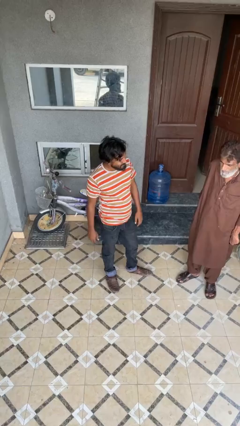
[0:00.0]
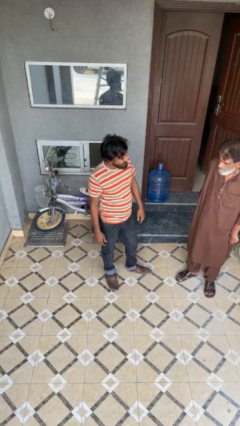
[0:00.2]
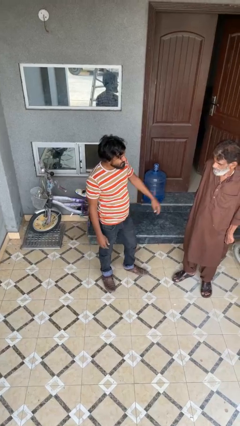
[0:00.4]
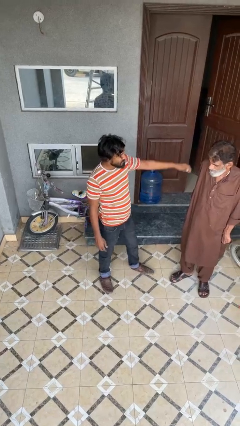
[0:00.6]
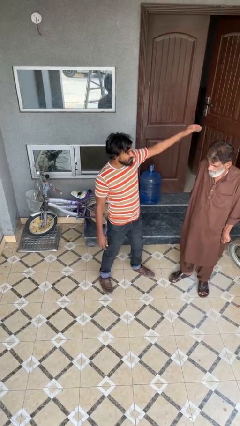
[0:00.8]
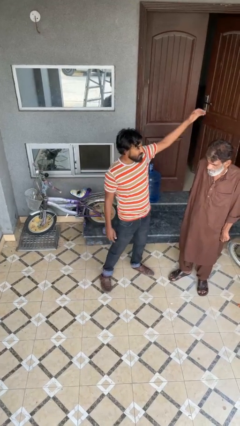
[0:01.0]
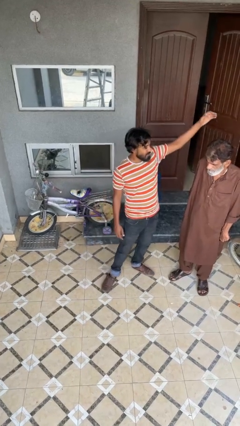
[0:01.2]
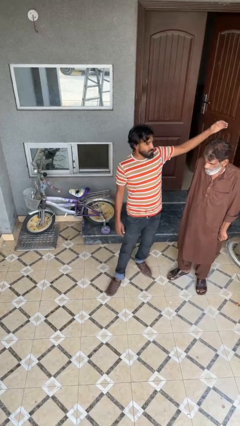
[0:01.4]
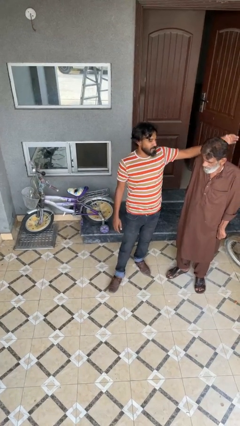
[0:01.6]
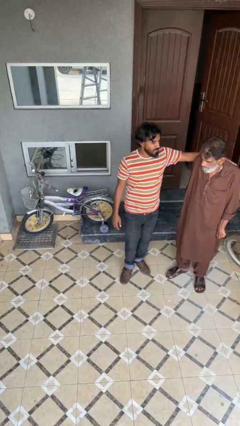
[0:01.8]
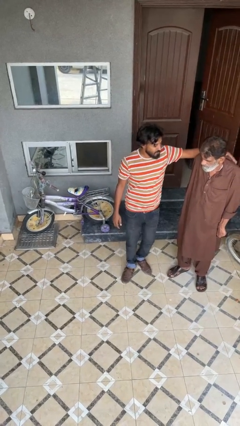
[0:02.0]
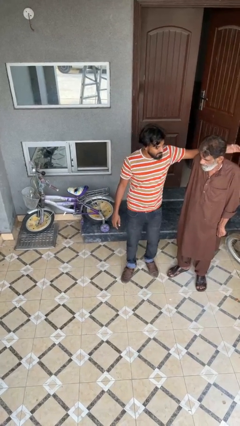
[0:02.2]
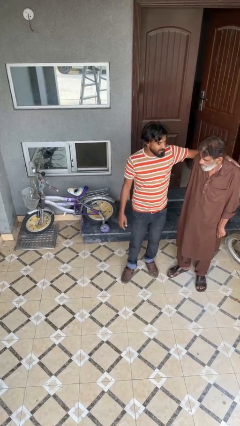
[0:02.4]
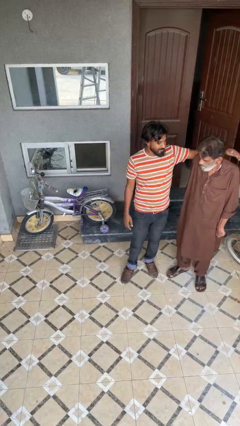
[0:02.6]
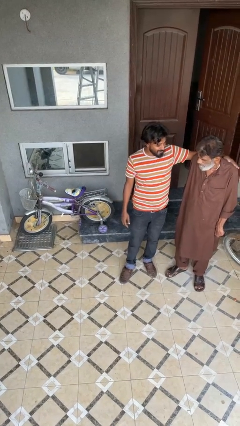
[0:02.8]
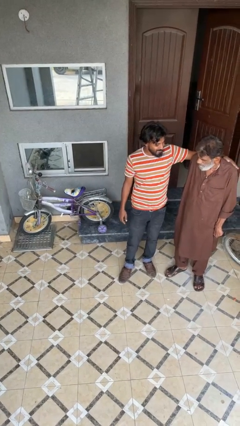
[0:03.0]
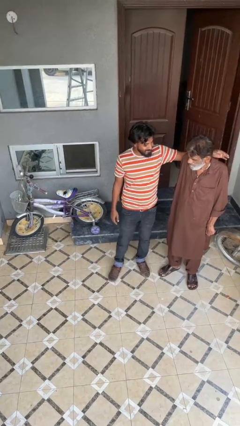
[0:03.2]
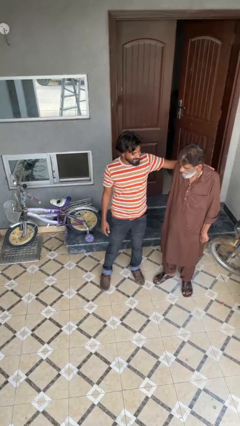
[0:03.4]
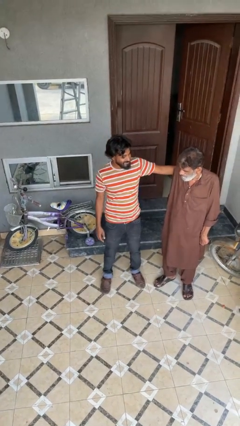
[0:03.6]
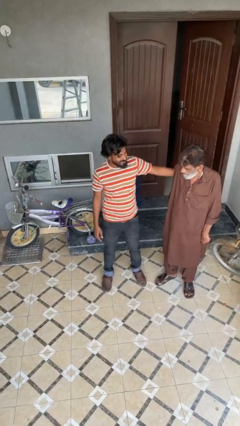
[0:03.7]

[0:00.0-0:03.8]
person pounds shoulders of person

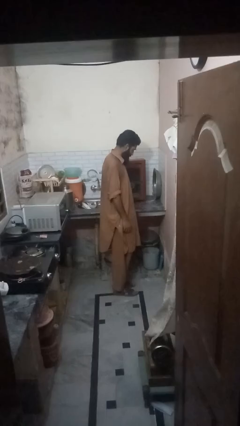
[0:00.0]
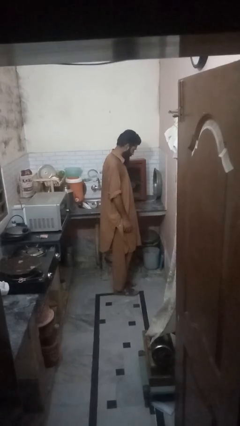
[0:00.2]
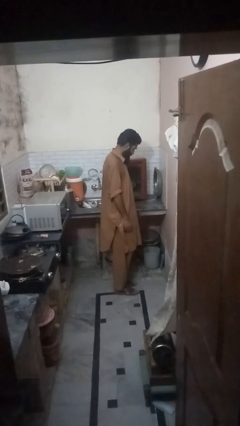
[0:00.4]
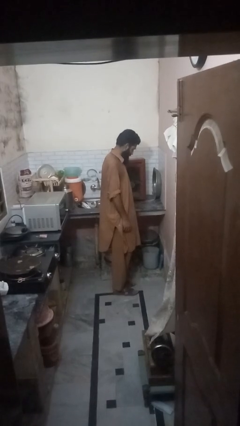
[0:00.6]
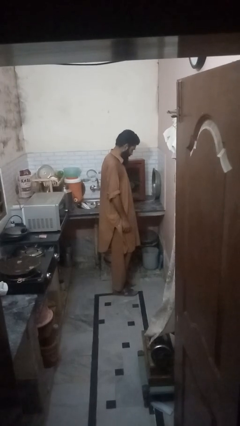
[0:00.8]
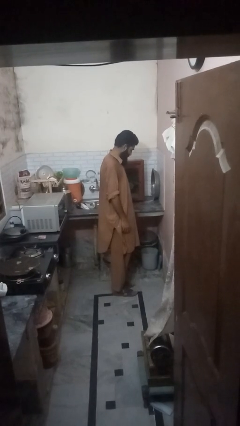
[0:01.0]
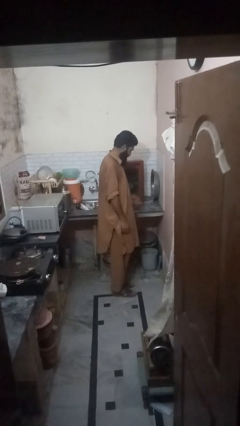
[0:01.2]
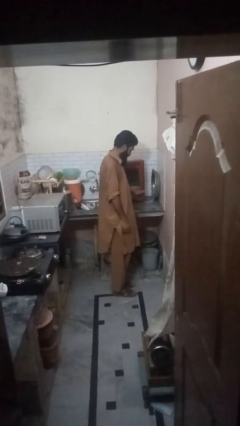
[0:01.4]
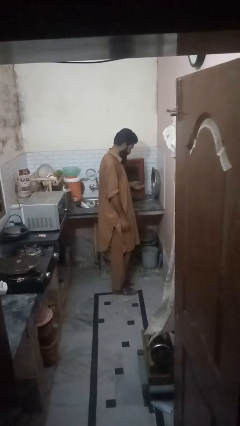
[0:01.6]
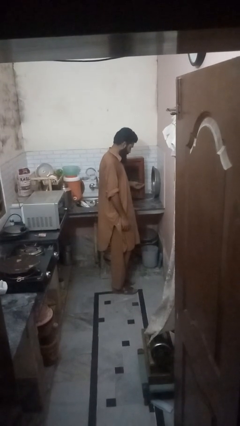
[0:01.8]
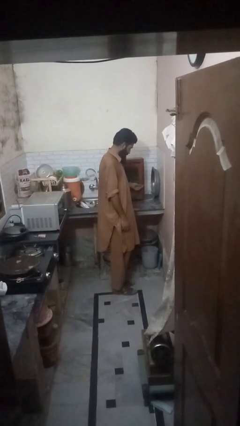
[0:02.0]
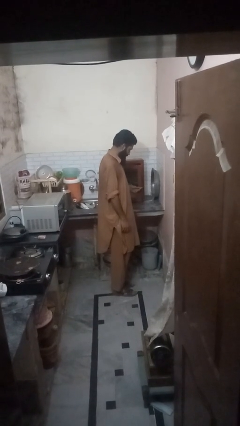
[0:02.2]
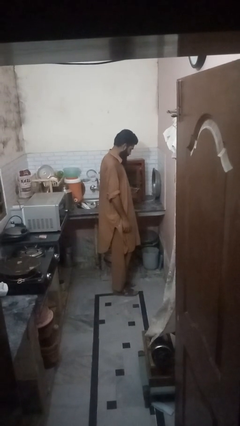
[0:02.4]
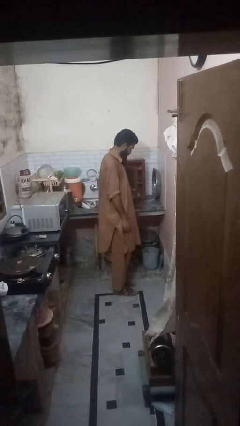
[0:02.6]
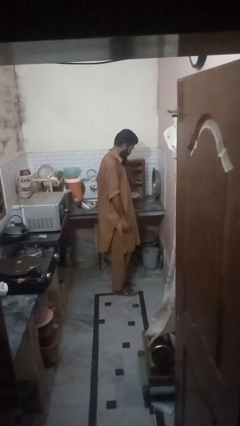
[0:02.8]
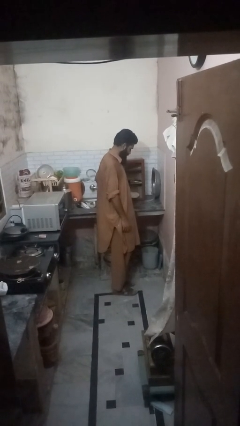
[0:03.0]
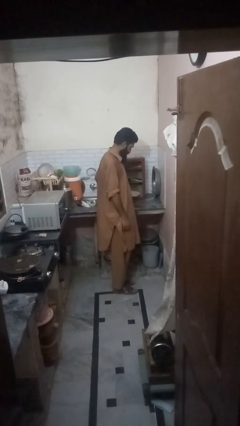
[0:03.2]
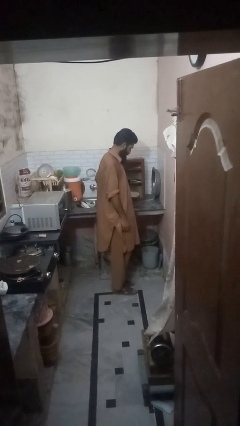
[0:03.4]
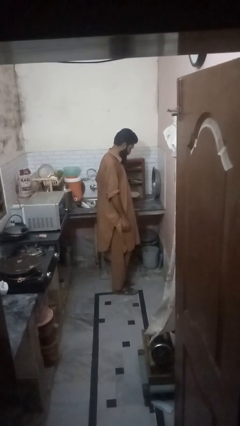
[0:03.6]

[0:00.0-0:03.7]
person opens cabinet

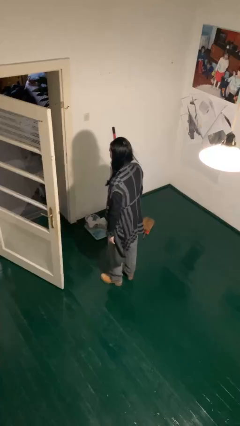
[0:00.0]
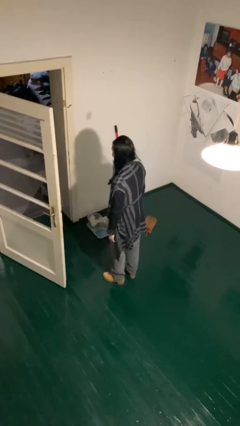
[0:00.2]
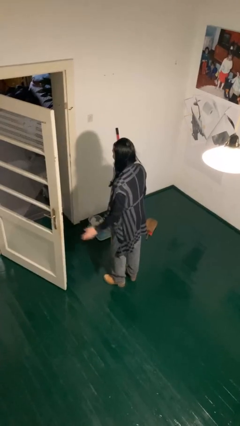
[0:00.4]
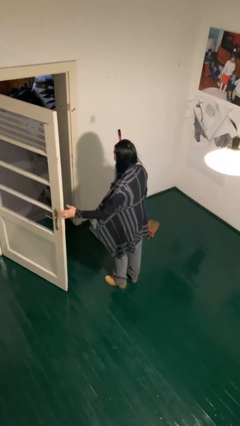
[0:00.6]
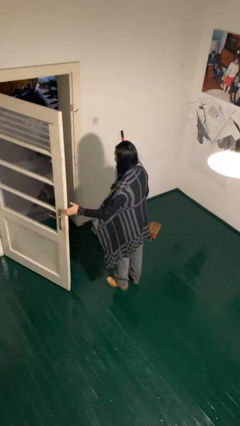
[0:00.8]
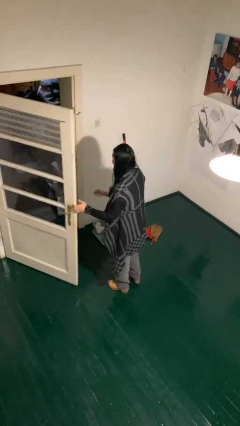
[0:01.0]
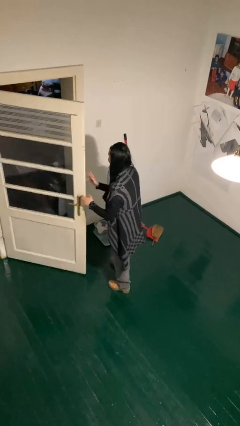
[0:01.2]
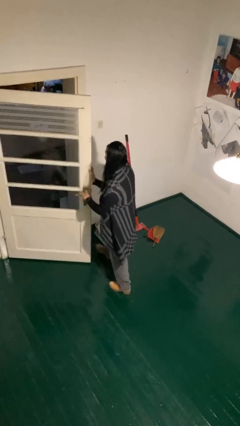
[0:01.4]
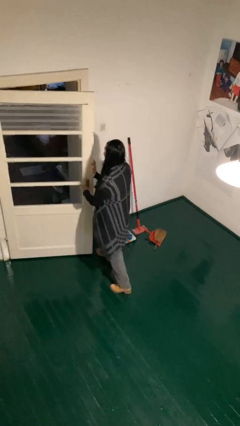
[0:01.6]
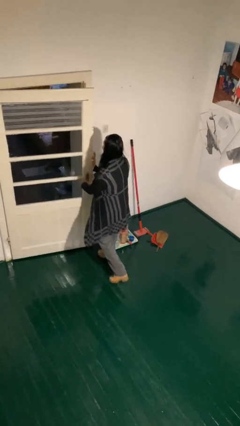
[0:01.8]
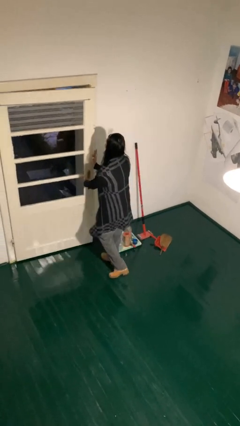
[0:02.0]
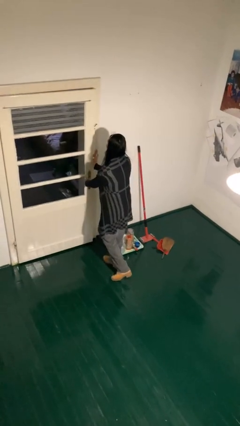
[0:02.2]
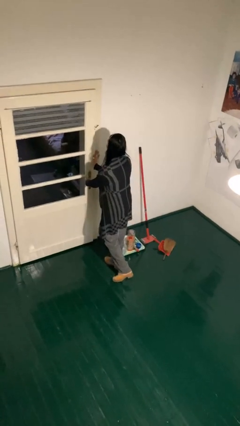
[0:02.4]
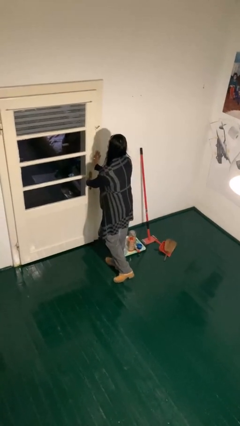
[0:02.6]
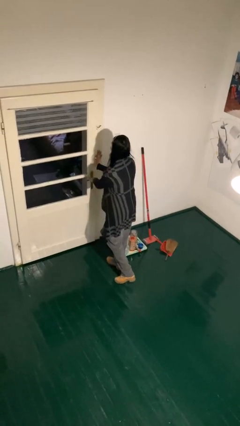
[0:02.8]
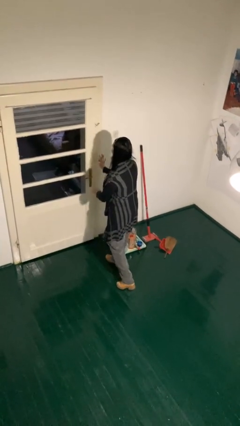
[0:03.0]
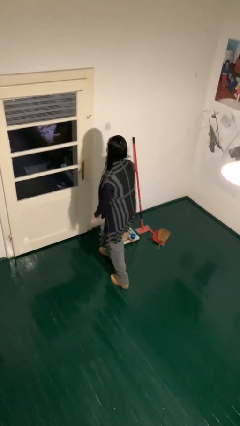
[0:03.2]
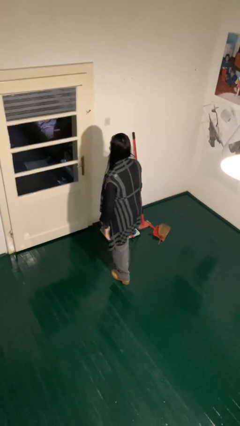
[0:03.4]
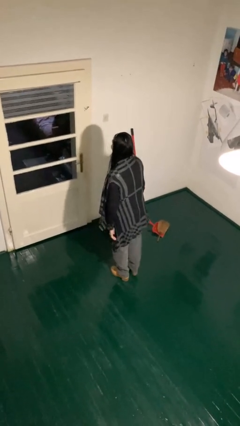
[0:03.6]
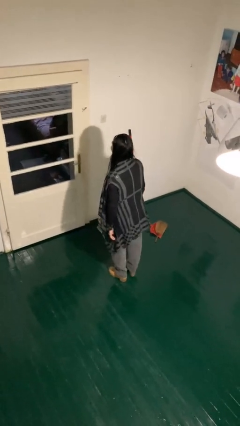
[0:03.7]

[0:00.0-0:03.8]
person closes facility door

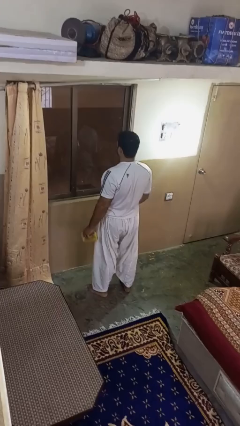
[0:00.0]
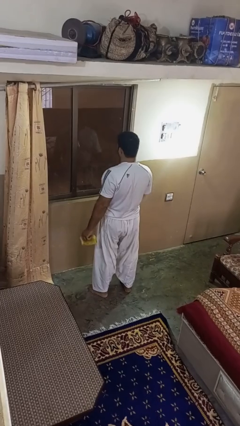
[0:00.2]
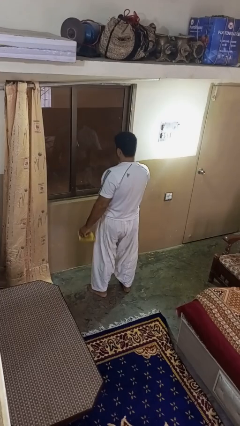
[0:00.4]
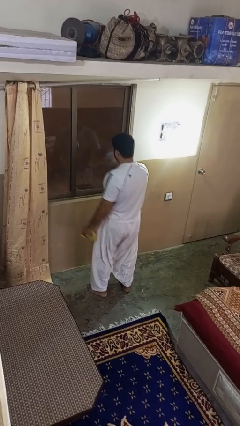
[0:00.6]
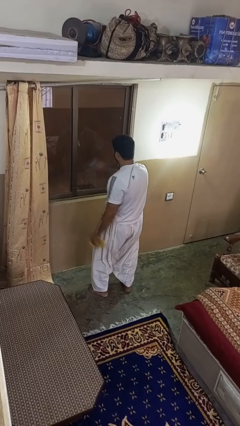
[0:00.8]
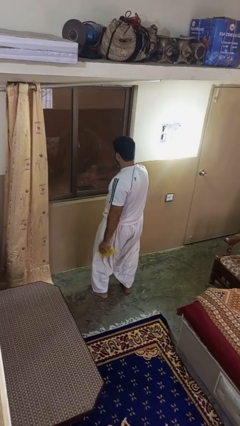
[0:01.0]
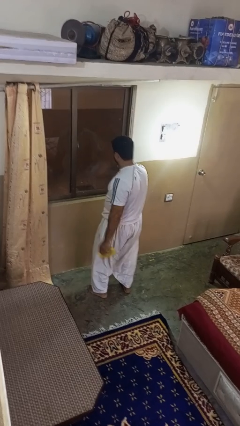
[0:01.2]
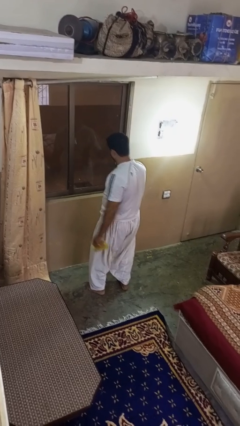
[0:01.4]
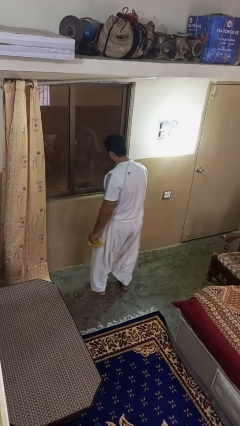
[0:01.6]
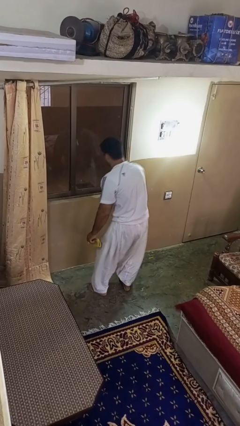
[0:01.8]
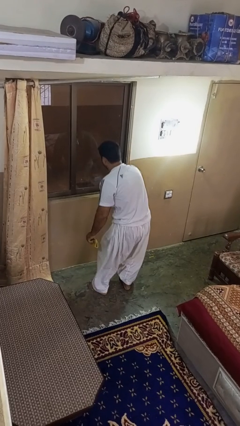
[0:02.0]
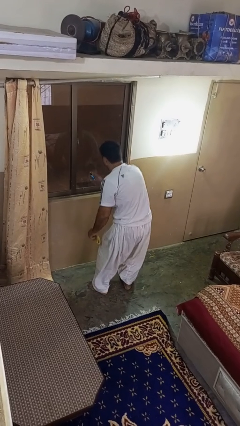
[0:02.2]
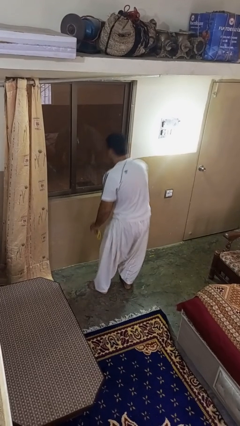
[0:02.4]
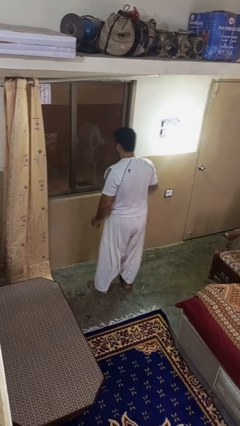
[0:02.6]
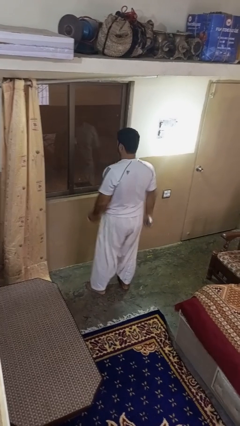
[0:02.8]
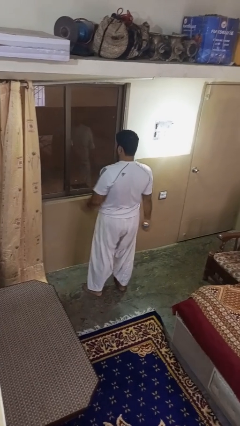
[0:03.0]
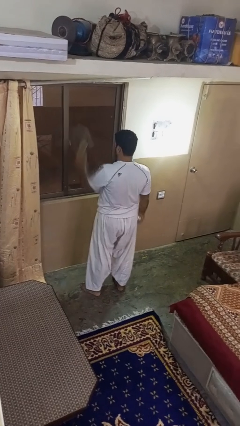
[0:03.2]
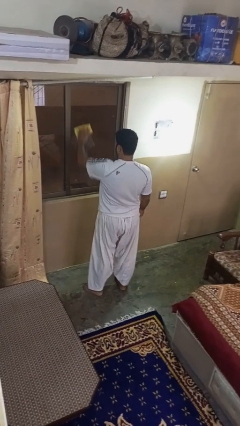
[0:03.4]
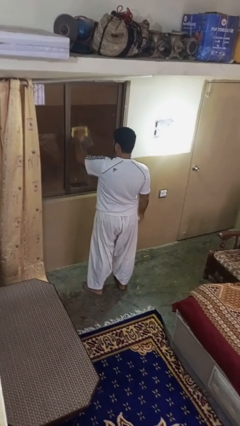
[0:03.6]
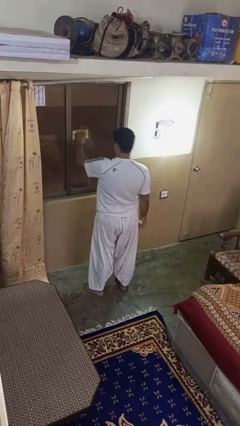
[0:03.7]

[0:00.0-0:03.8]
person sprays from bottle

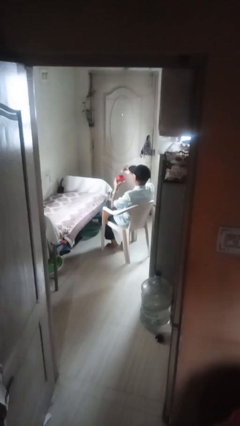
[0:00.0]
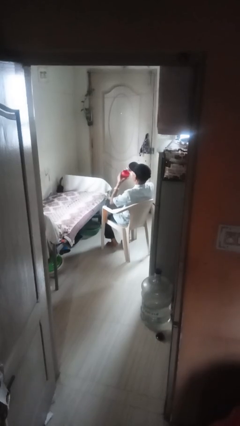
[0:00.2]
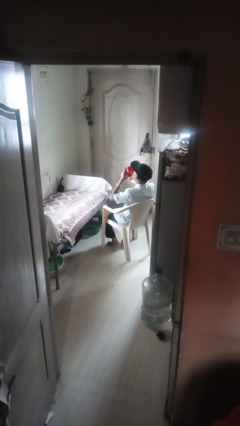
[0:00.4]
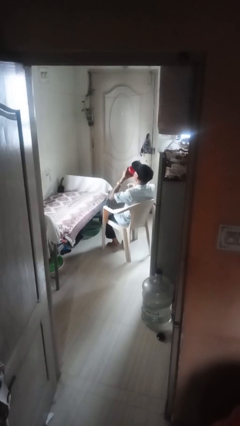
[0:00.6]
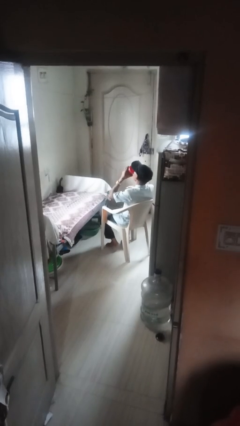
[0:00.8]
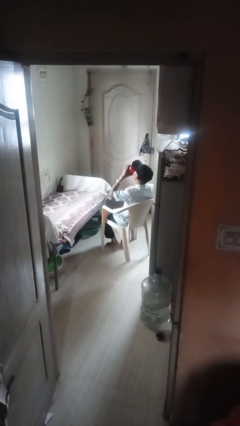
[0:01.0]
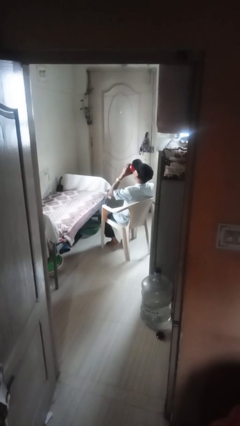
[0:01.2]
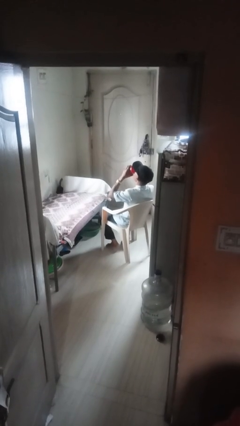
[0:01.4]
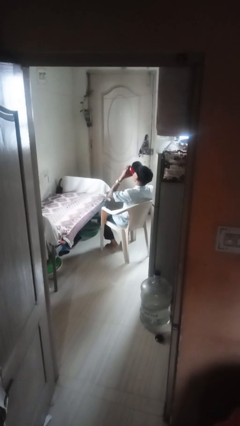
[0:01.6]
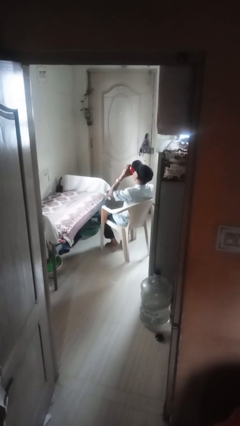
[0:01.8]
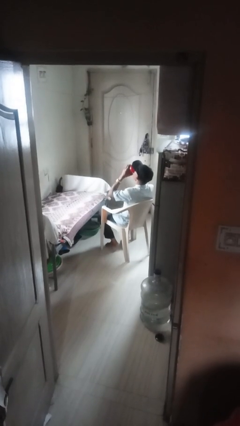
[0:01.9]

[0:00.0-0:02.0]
person drinks from mug

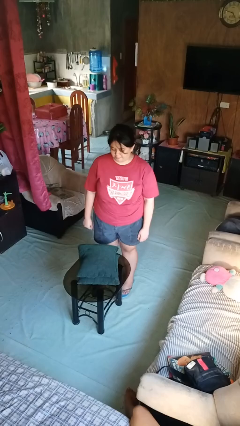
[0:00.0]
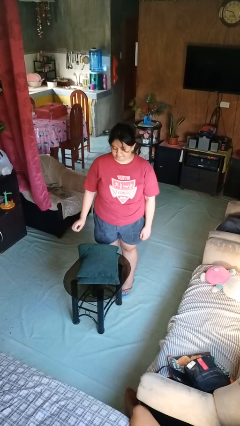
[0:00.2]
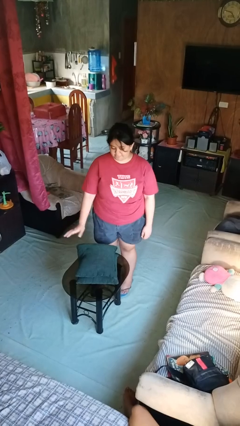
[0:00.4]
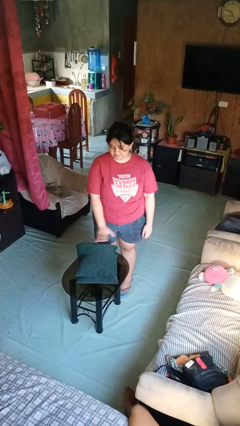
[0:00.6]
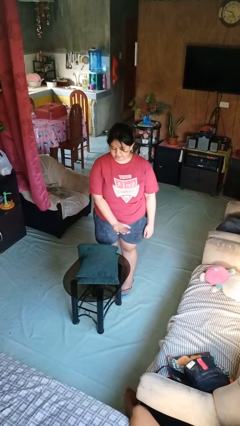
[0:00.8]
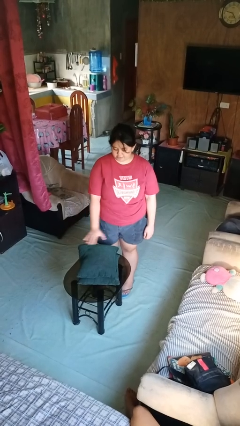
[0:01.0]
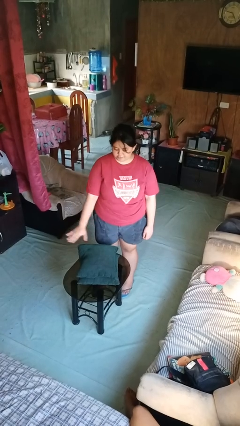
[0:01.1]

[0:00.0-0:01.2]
person waves hand over object
